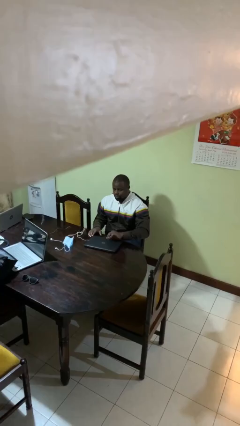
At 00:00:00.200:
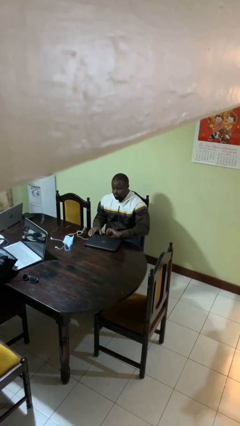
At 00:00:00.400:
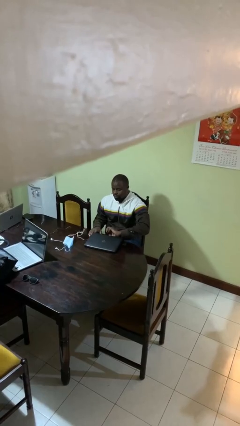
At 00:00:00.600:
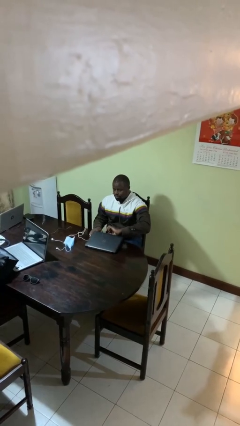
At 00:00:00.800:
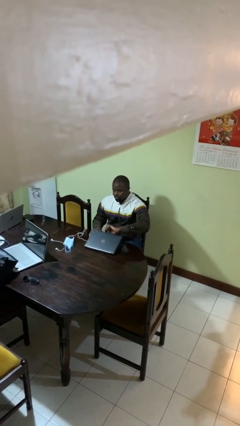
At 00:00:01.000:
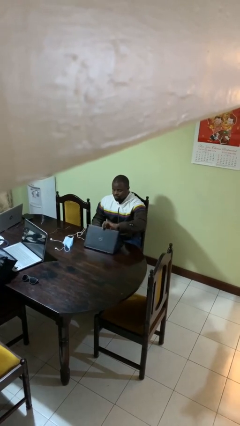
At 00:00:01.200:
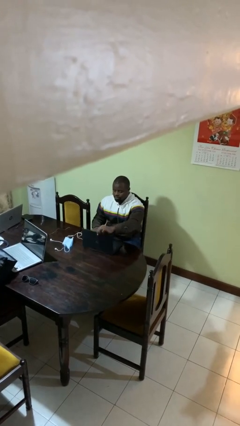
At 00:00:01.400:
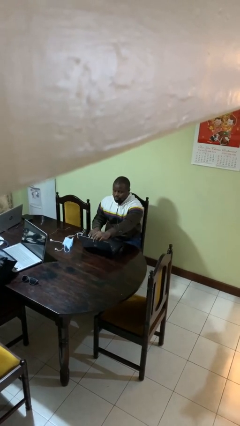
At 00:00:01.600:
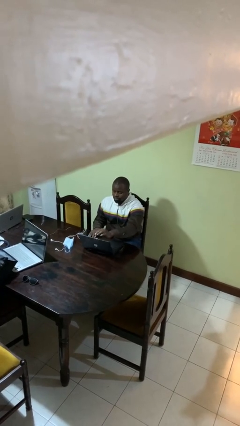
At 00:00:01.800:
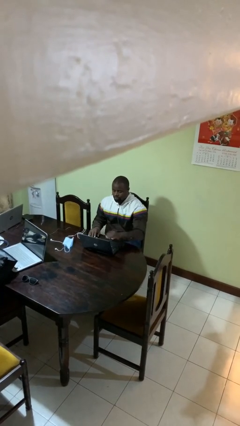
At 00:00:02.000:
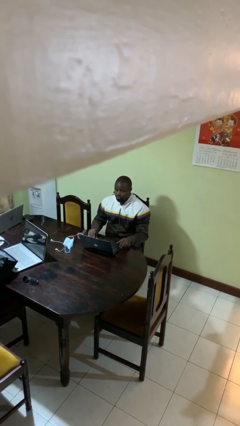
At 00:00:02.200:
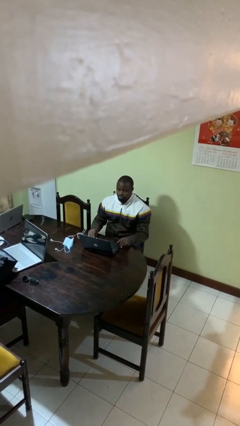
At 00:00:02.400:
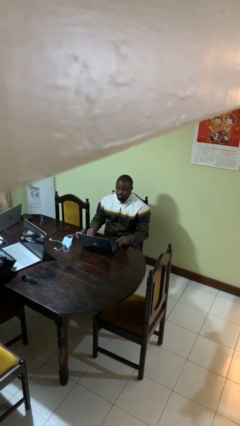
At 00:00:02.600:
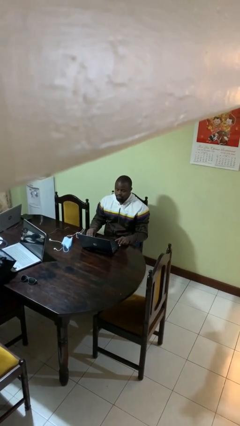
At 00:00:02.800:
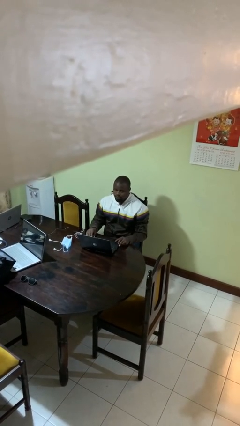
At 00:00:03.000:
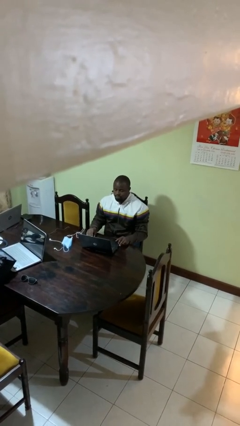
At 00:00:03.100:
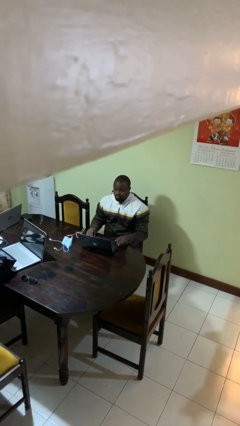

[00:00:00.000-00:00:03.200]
person opens laptop

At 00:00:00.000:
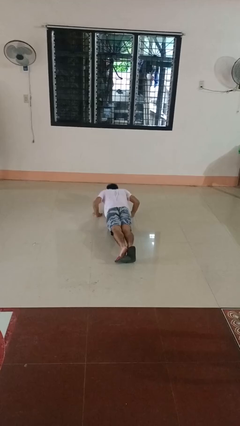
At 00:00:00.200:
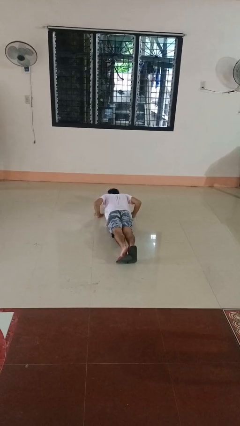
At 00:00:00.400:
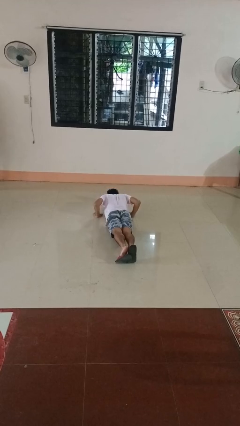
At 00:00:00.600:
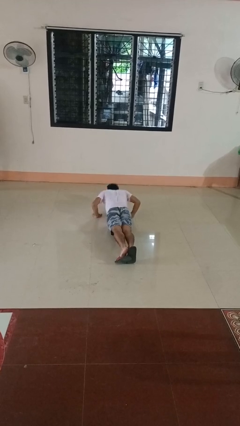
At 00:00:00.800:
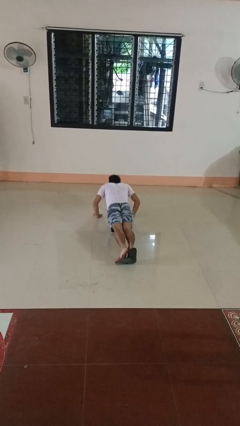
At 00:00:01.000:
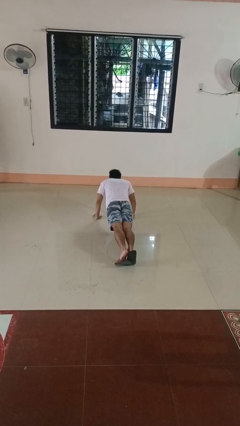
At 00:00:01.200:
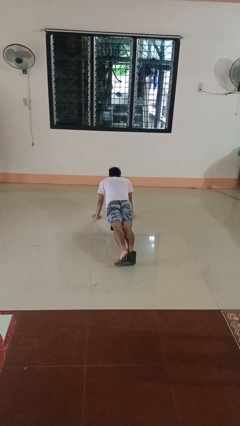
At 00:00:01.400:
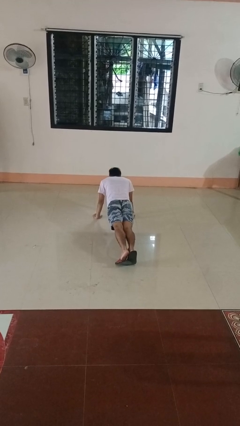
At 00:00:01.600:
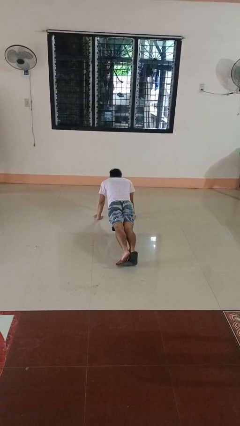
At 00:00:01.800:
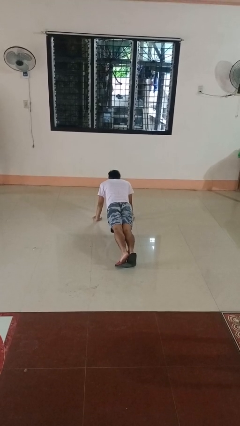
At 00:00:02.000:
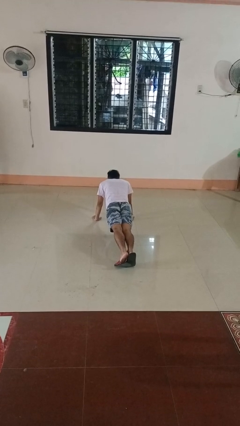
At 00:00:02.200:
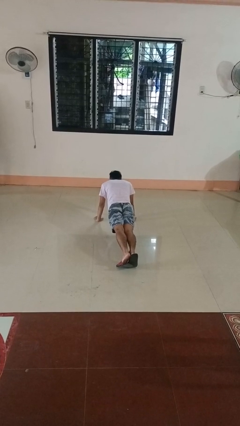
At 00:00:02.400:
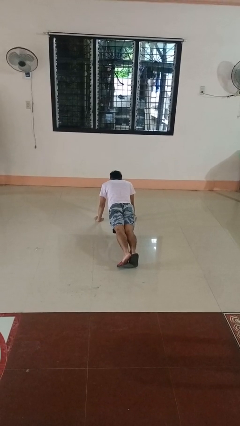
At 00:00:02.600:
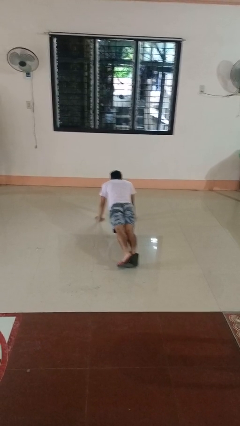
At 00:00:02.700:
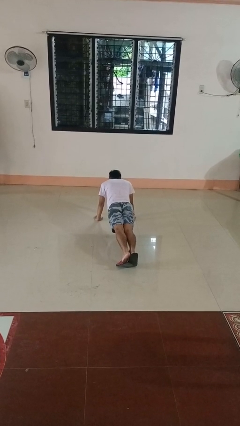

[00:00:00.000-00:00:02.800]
person exercises with pushup

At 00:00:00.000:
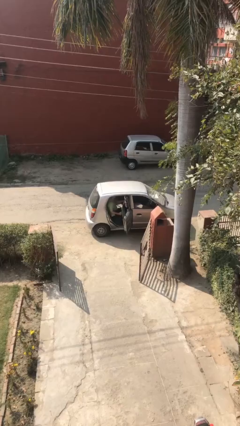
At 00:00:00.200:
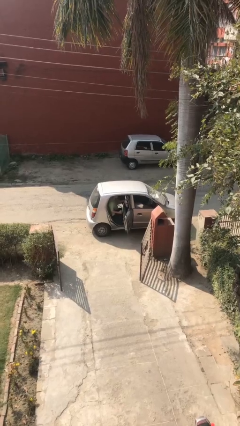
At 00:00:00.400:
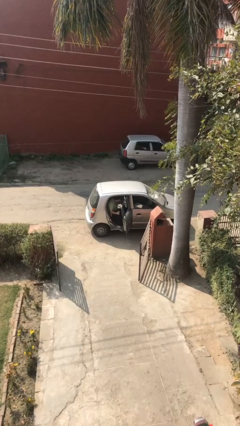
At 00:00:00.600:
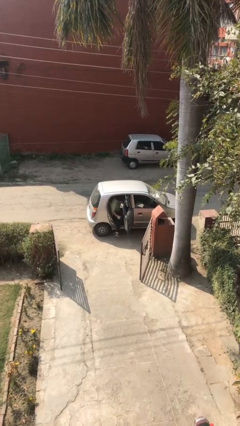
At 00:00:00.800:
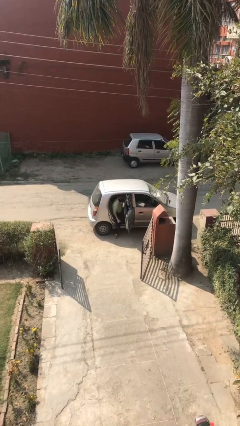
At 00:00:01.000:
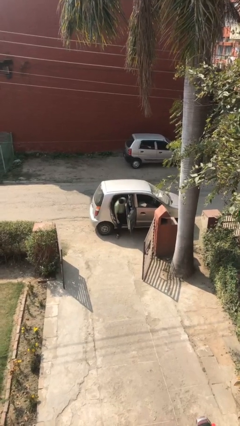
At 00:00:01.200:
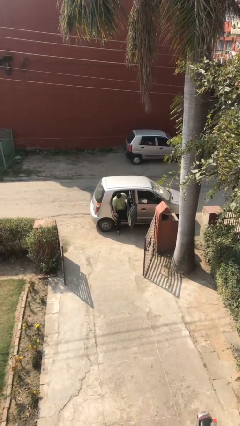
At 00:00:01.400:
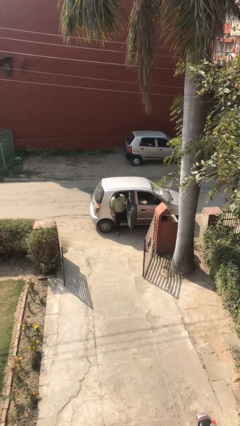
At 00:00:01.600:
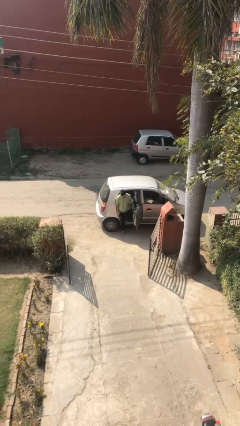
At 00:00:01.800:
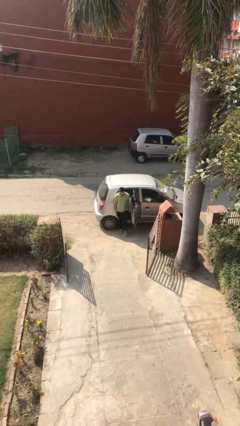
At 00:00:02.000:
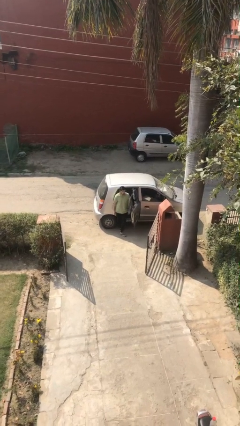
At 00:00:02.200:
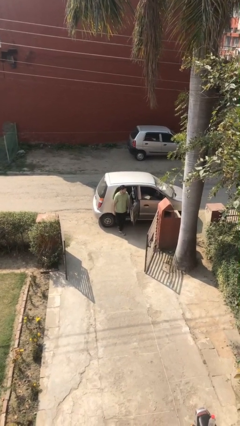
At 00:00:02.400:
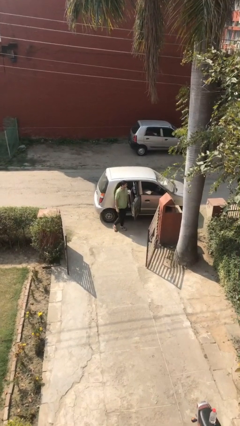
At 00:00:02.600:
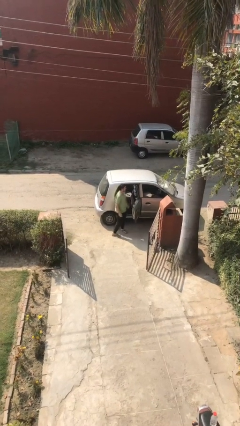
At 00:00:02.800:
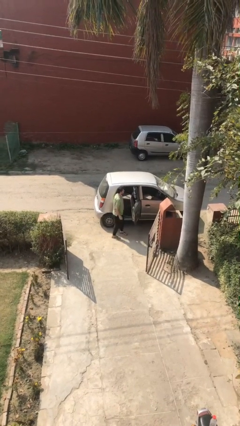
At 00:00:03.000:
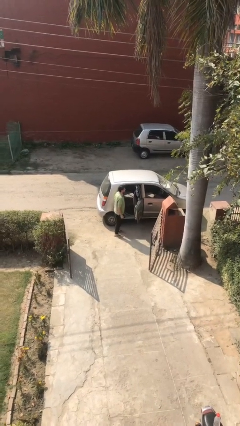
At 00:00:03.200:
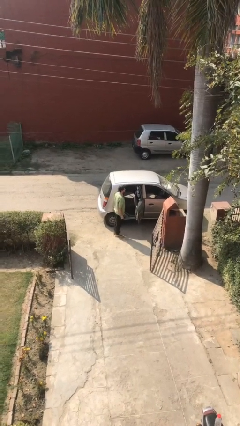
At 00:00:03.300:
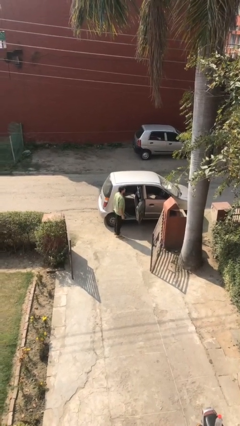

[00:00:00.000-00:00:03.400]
person exits car

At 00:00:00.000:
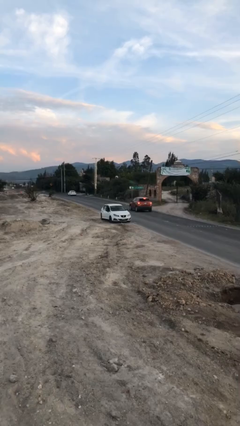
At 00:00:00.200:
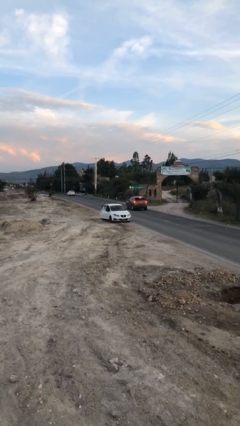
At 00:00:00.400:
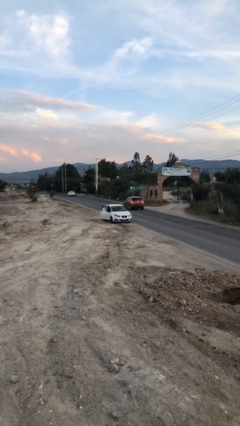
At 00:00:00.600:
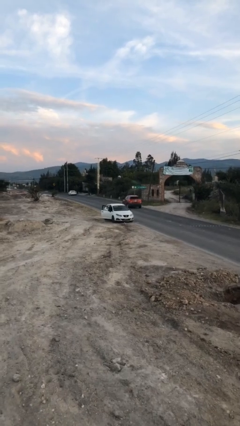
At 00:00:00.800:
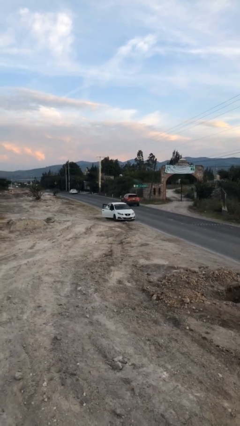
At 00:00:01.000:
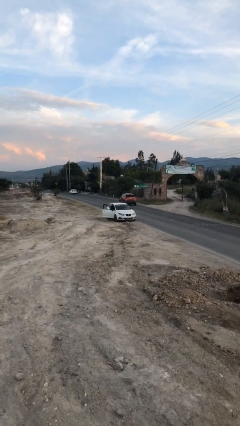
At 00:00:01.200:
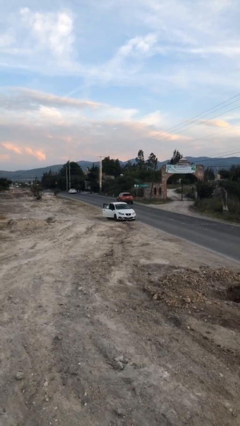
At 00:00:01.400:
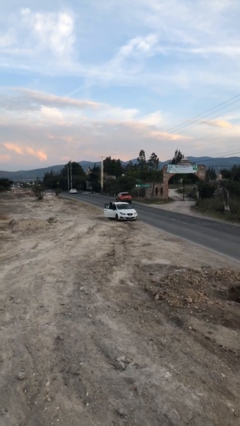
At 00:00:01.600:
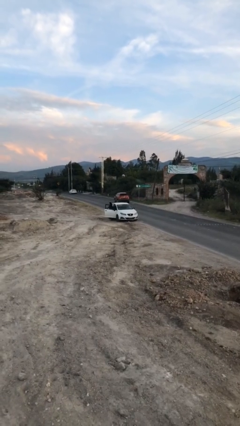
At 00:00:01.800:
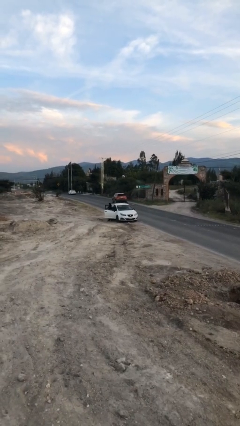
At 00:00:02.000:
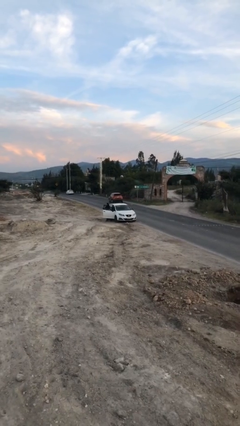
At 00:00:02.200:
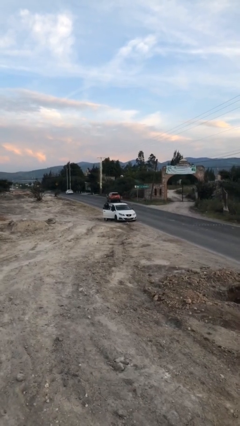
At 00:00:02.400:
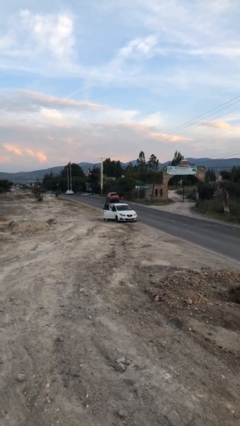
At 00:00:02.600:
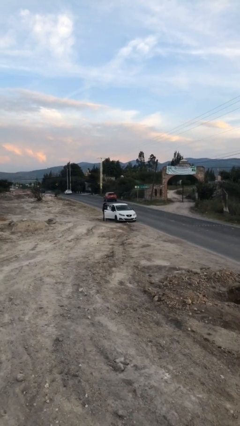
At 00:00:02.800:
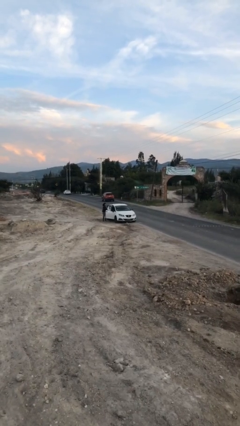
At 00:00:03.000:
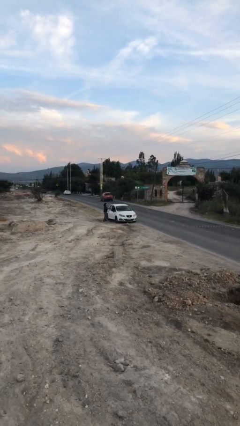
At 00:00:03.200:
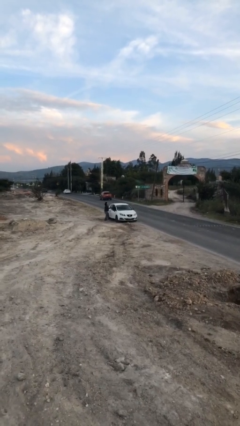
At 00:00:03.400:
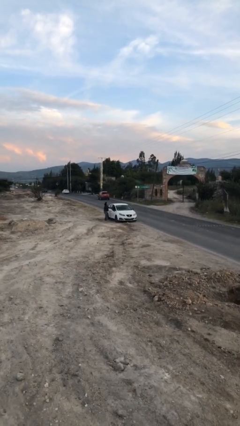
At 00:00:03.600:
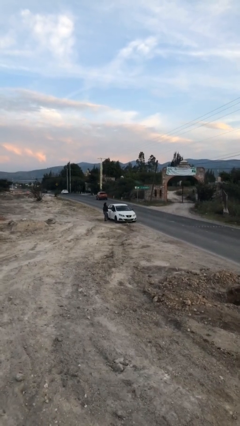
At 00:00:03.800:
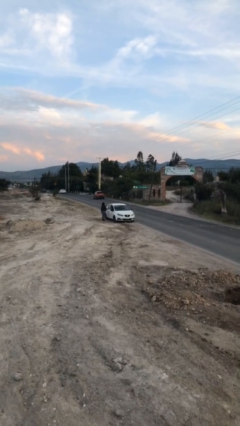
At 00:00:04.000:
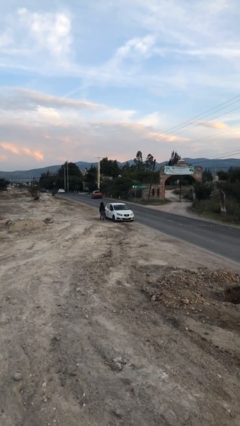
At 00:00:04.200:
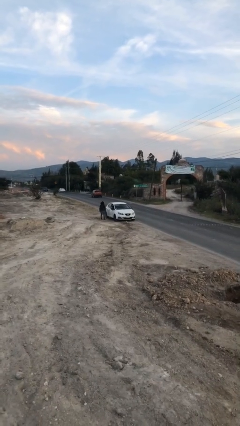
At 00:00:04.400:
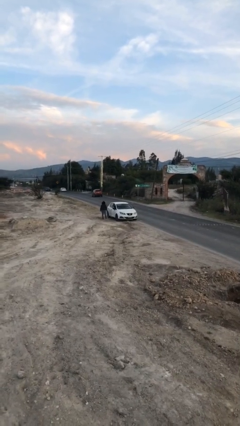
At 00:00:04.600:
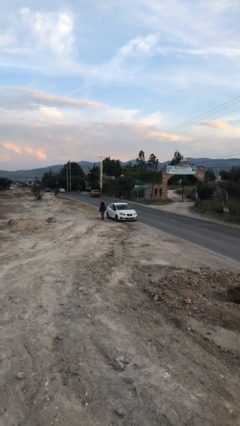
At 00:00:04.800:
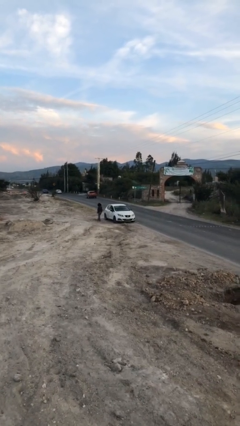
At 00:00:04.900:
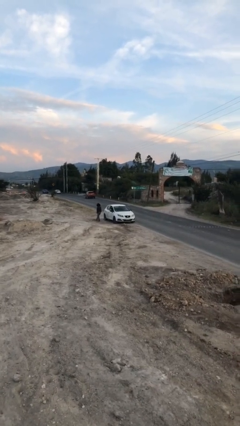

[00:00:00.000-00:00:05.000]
car drops off person

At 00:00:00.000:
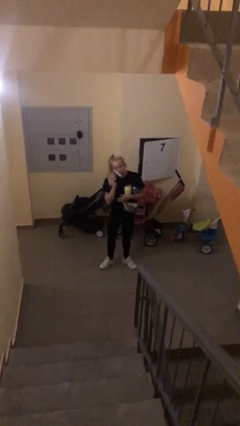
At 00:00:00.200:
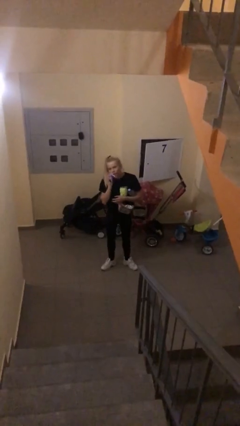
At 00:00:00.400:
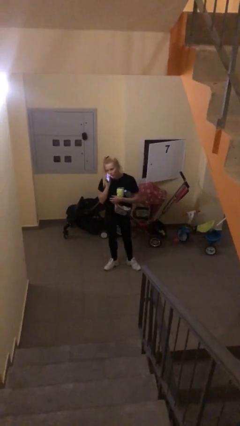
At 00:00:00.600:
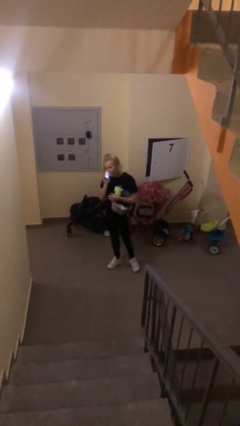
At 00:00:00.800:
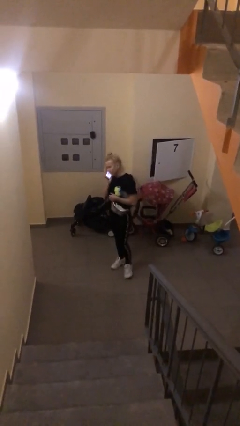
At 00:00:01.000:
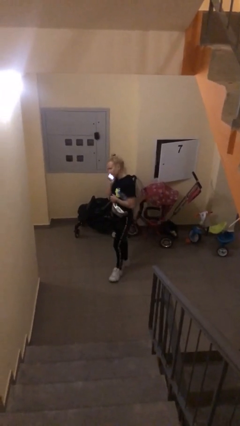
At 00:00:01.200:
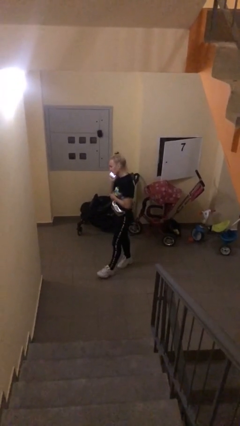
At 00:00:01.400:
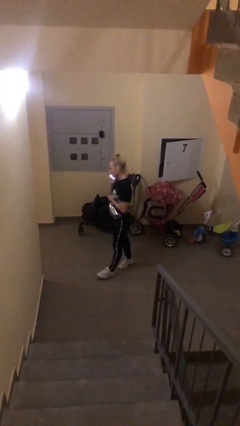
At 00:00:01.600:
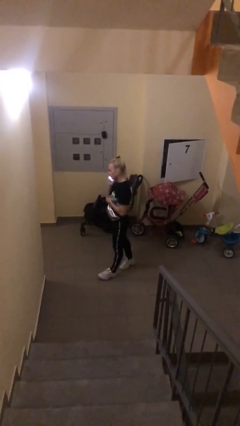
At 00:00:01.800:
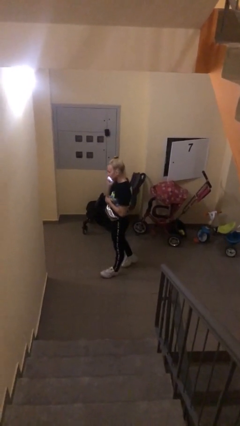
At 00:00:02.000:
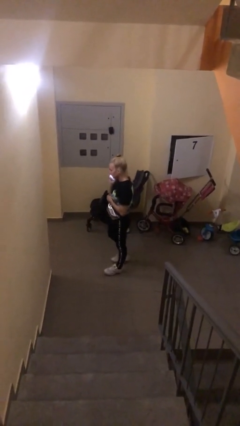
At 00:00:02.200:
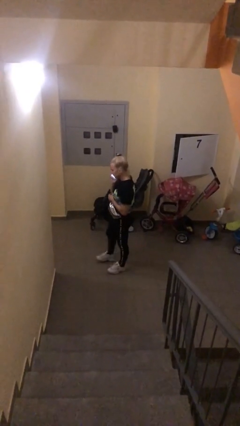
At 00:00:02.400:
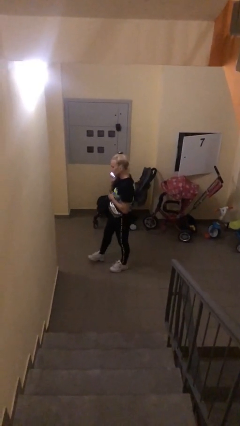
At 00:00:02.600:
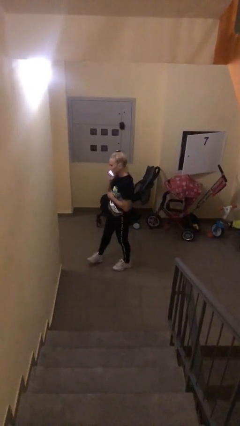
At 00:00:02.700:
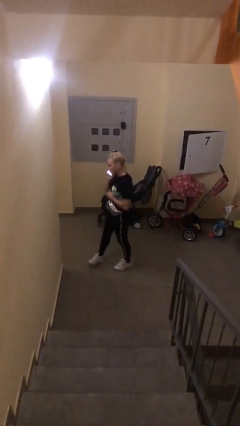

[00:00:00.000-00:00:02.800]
person talks on phone
